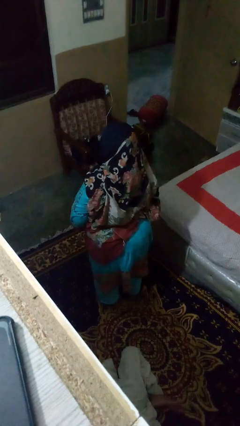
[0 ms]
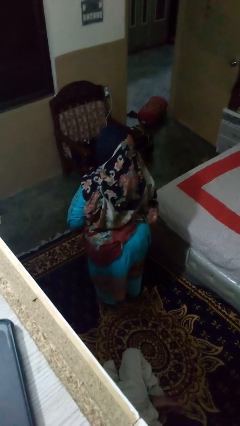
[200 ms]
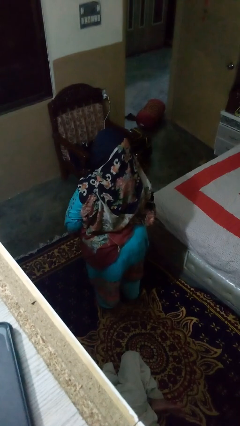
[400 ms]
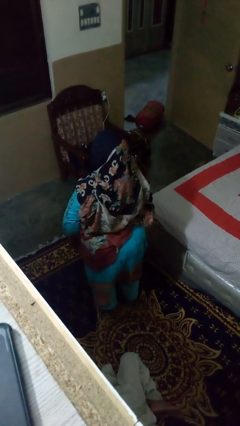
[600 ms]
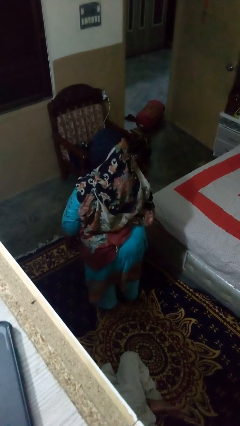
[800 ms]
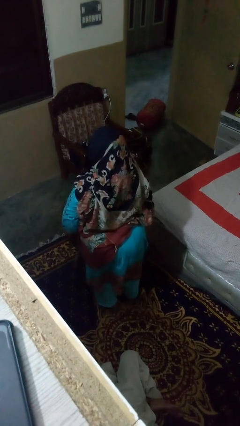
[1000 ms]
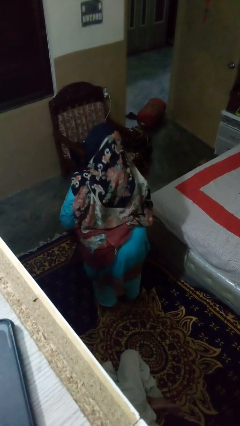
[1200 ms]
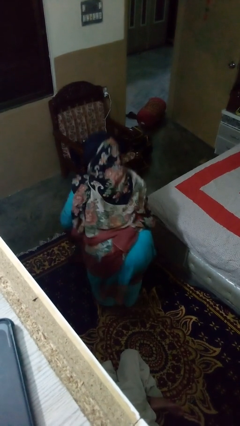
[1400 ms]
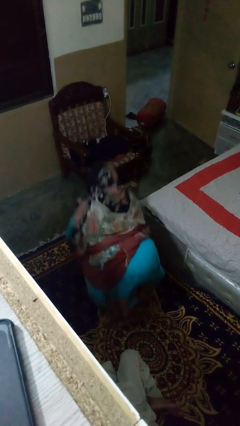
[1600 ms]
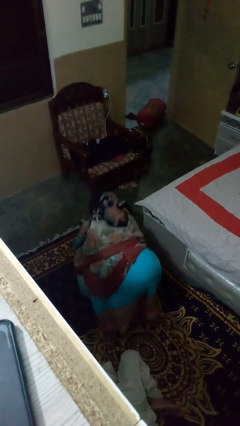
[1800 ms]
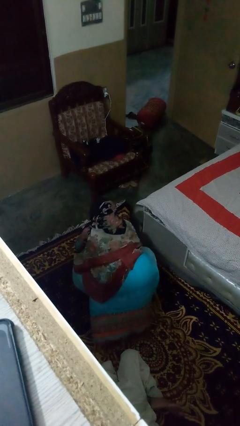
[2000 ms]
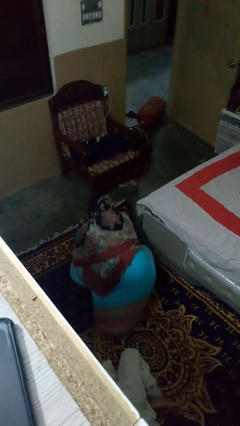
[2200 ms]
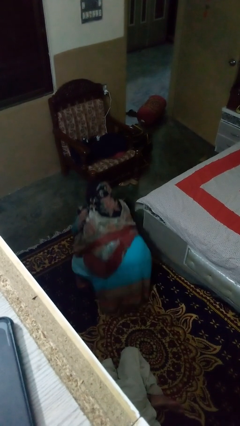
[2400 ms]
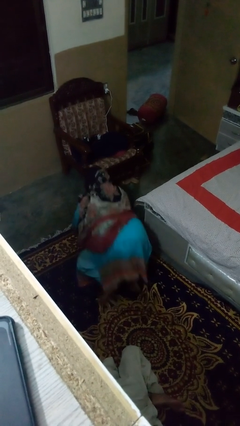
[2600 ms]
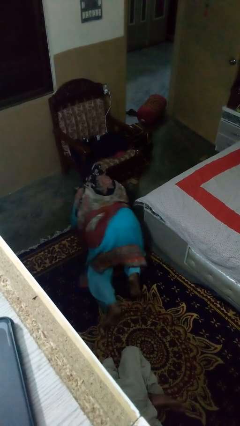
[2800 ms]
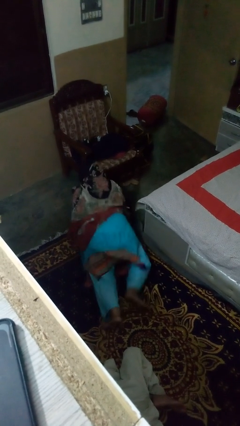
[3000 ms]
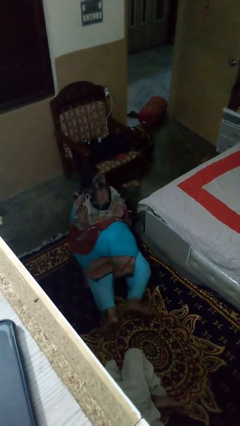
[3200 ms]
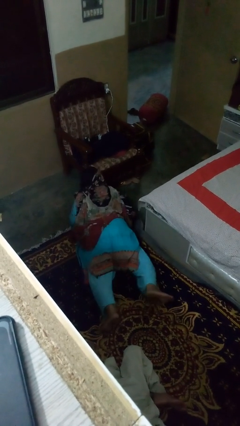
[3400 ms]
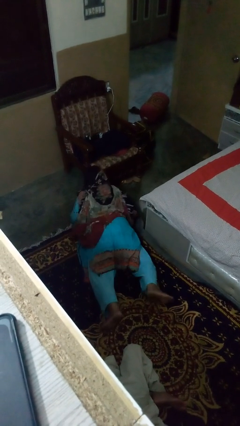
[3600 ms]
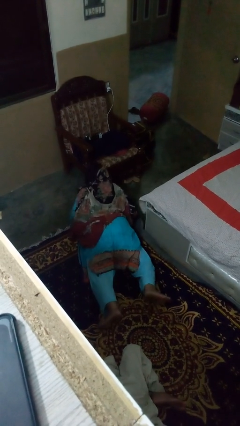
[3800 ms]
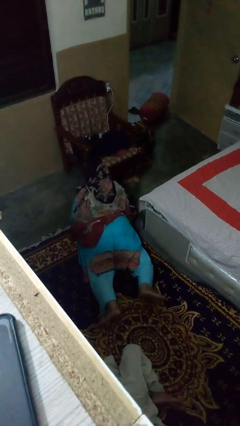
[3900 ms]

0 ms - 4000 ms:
person exercises with pushup

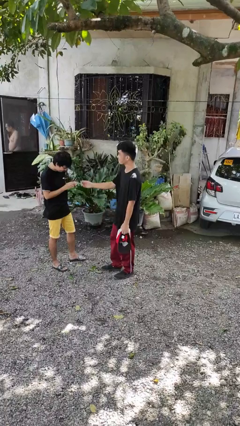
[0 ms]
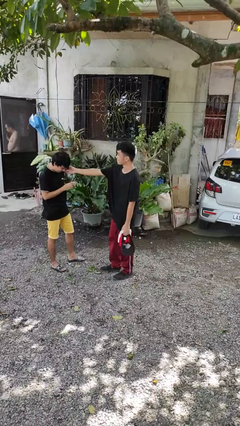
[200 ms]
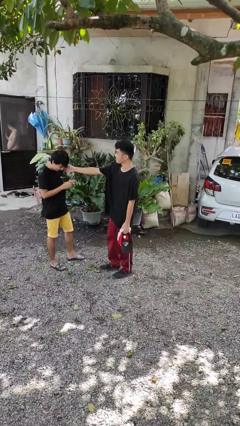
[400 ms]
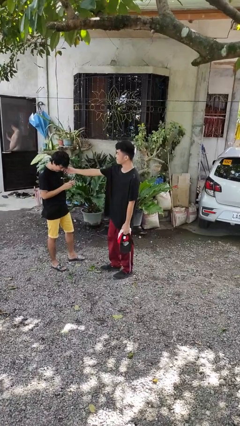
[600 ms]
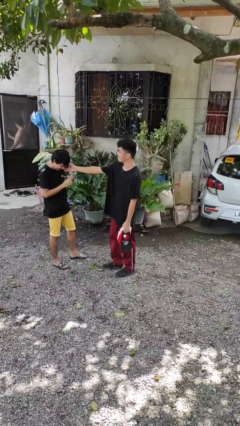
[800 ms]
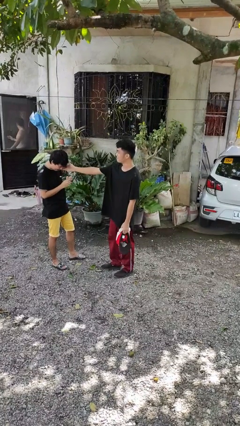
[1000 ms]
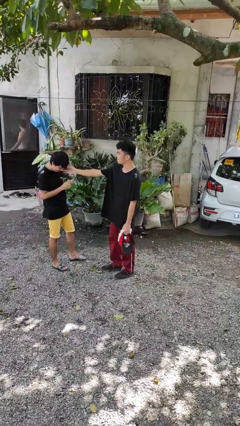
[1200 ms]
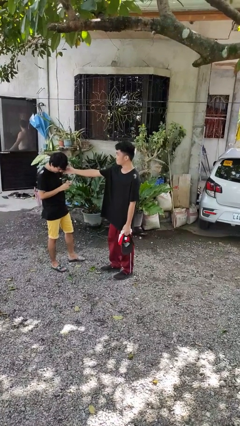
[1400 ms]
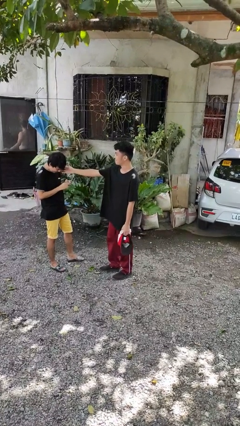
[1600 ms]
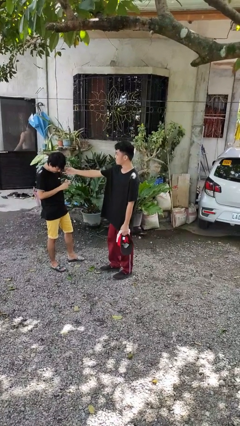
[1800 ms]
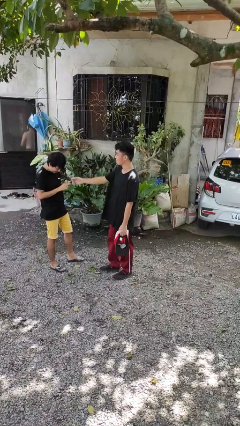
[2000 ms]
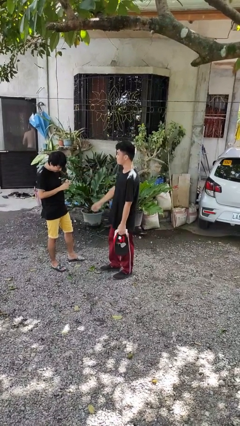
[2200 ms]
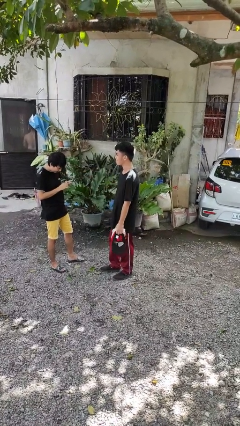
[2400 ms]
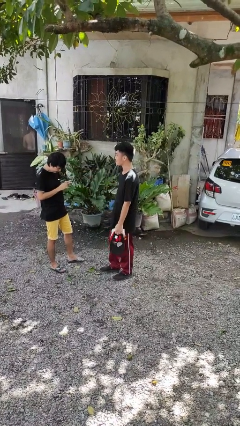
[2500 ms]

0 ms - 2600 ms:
person touches face of person

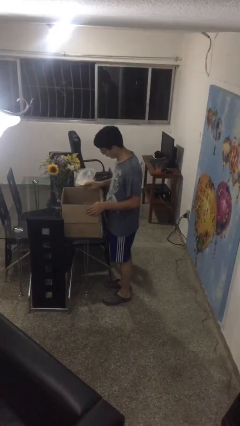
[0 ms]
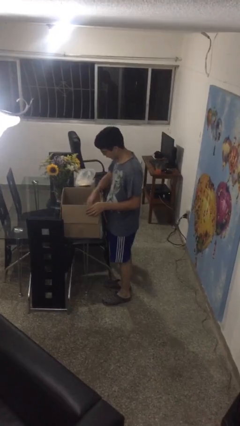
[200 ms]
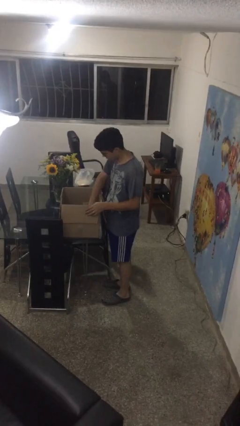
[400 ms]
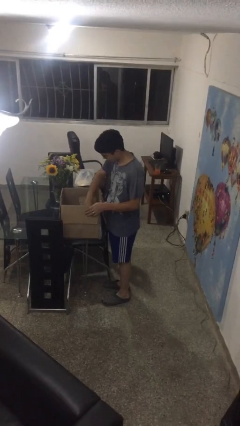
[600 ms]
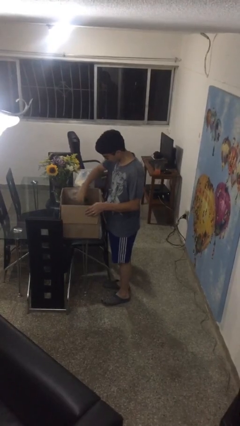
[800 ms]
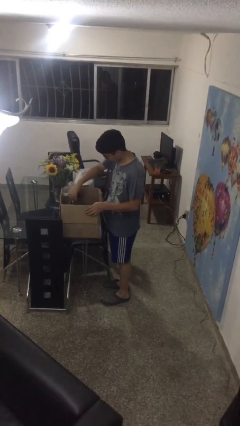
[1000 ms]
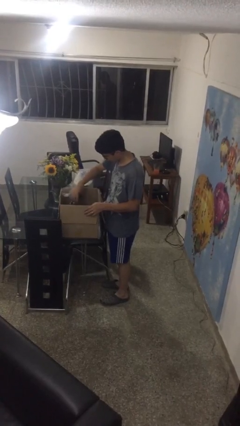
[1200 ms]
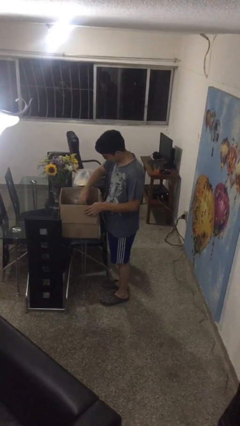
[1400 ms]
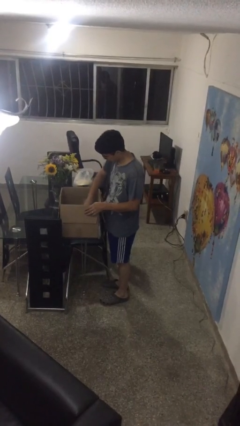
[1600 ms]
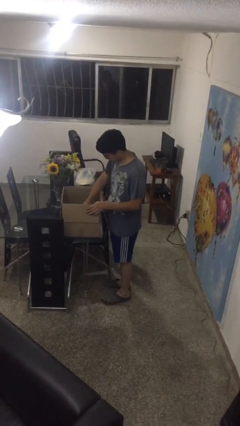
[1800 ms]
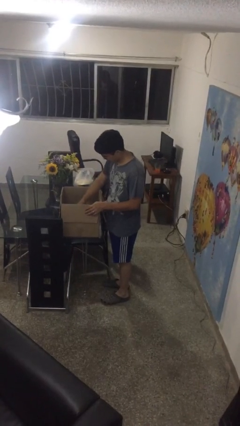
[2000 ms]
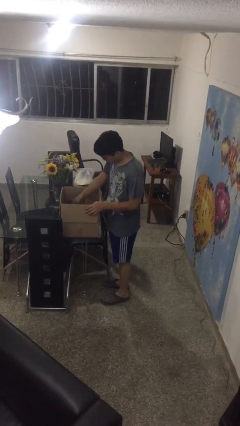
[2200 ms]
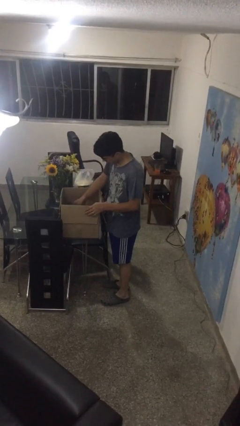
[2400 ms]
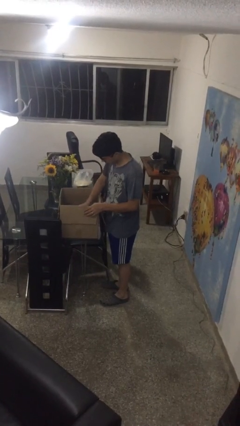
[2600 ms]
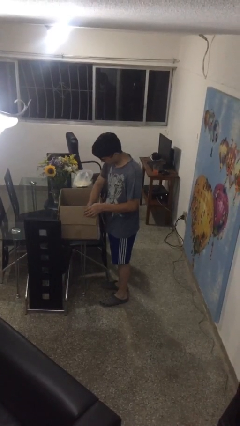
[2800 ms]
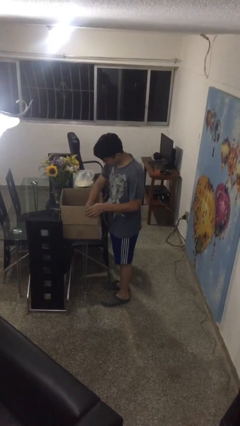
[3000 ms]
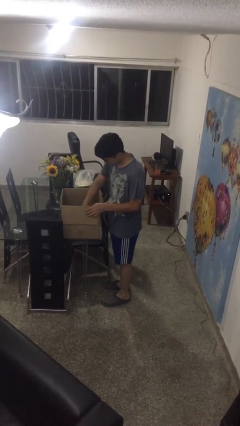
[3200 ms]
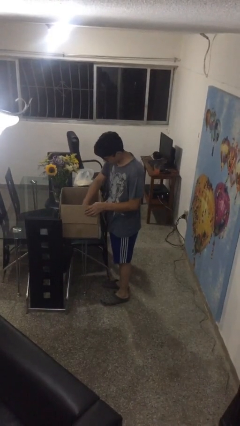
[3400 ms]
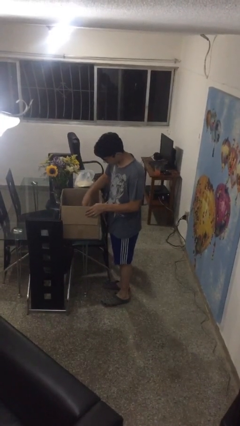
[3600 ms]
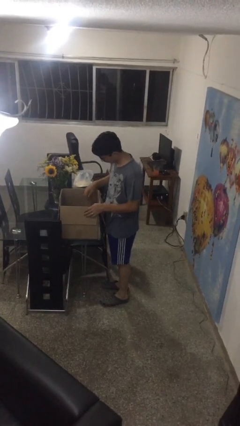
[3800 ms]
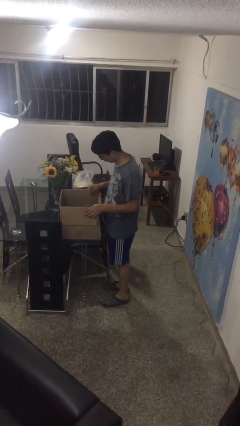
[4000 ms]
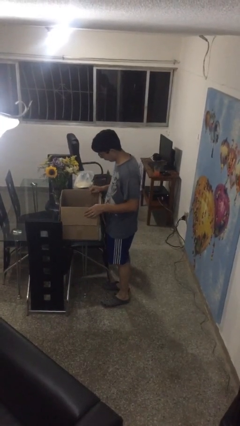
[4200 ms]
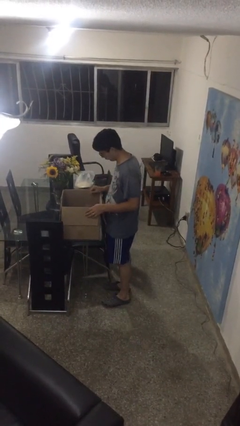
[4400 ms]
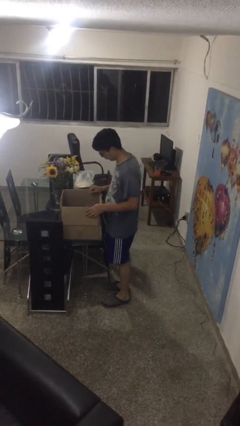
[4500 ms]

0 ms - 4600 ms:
person searches in box

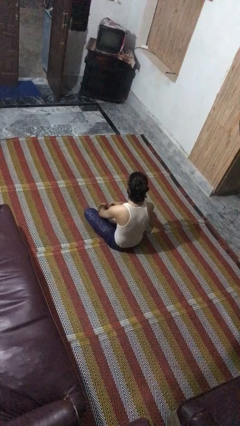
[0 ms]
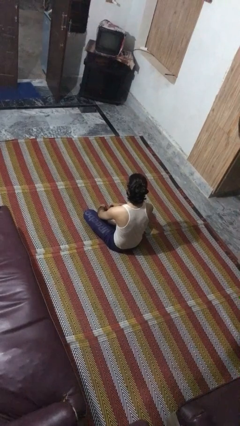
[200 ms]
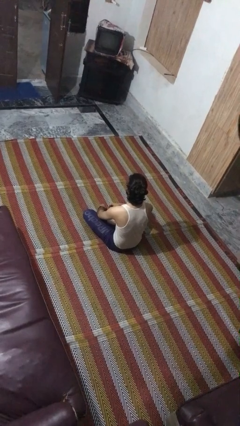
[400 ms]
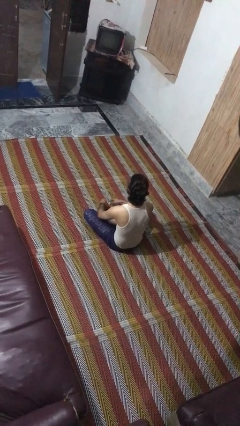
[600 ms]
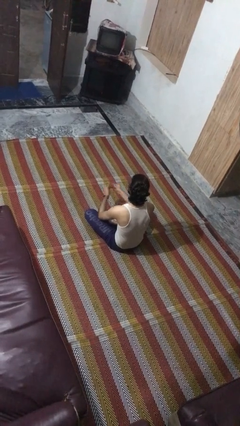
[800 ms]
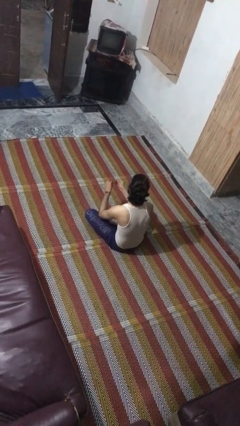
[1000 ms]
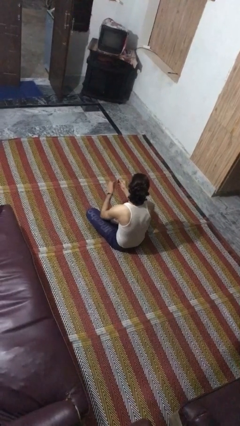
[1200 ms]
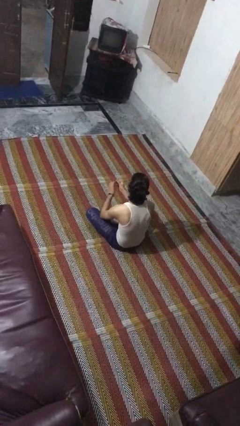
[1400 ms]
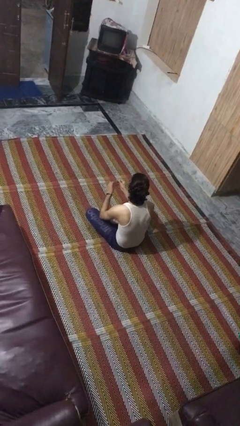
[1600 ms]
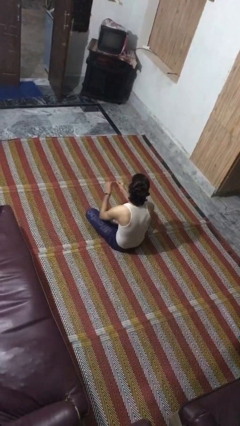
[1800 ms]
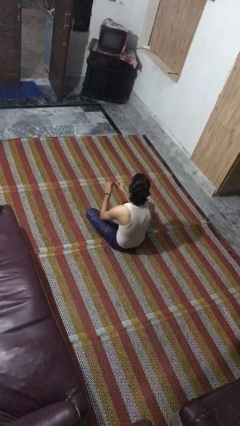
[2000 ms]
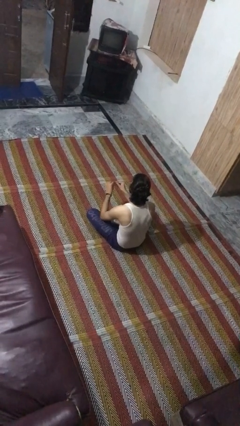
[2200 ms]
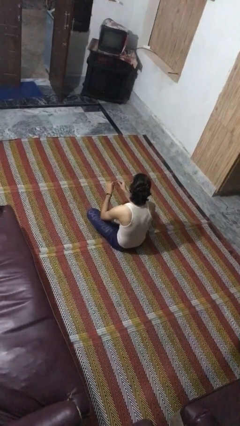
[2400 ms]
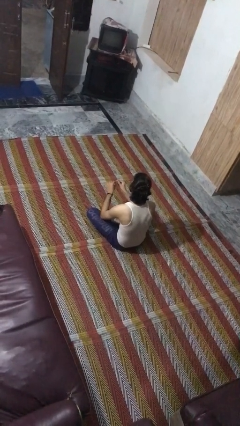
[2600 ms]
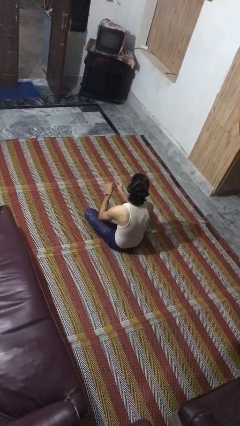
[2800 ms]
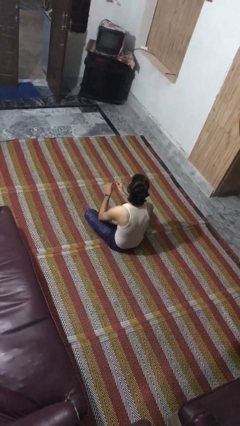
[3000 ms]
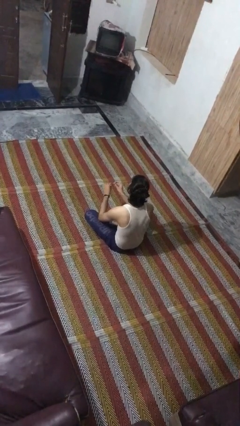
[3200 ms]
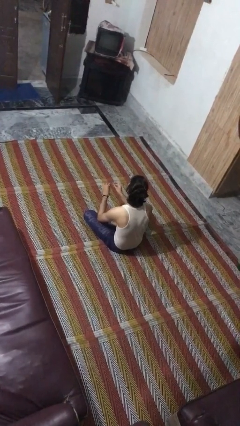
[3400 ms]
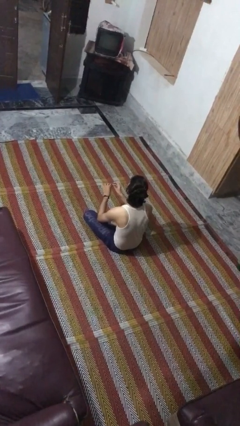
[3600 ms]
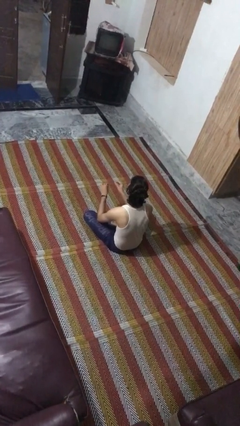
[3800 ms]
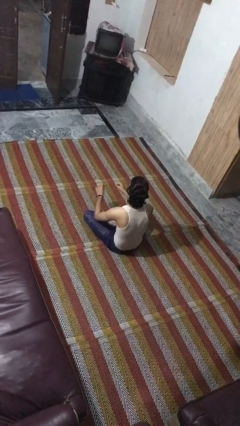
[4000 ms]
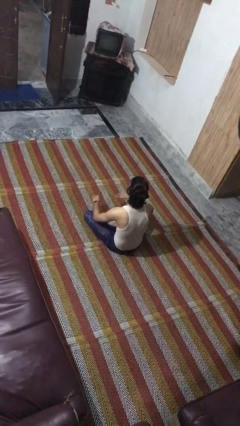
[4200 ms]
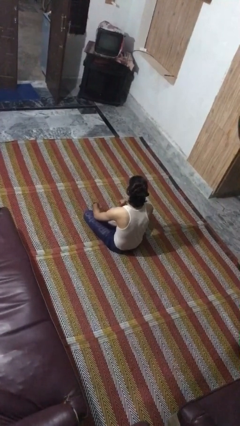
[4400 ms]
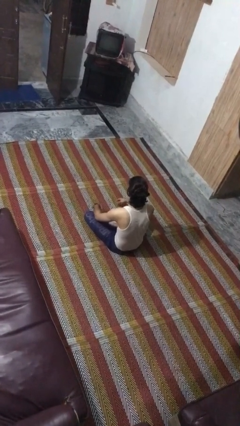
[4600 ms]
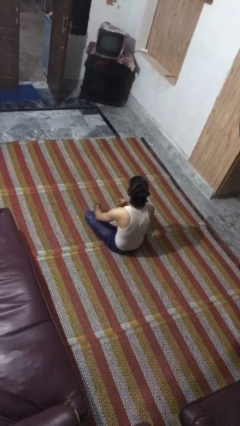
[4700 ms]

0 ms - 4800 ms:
person files fingernails

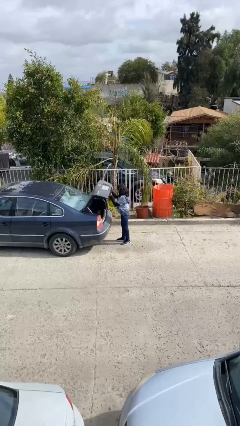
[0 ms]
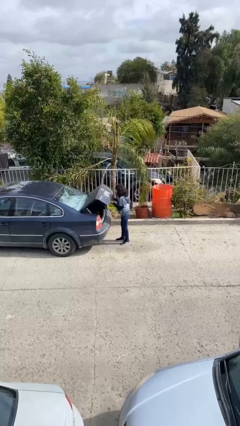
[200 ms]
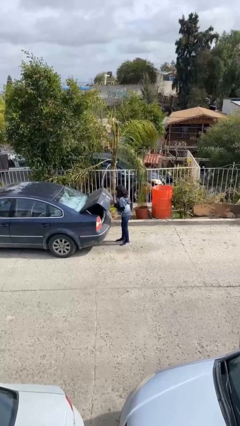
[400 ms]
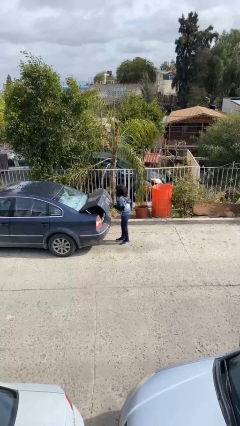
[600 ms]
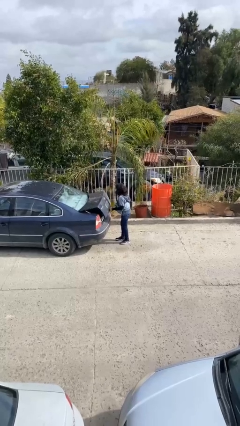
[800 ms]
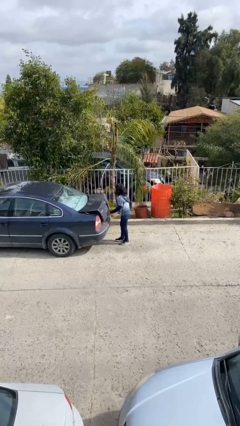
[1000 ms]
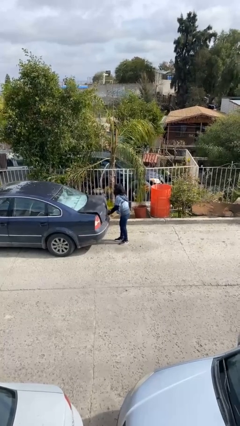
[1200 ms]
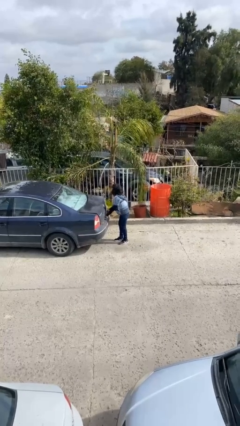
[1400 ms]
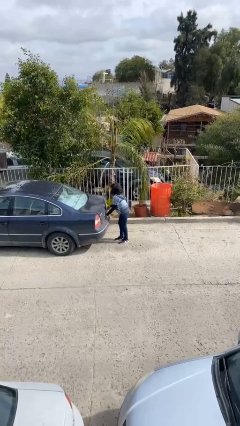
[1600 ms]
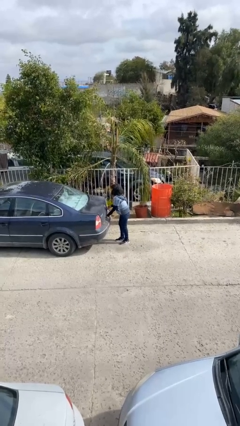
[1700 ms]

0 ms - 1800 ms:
person closes car trunk
